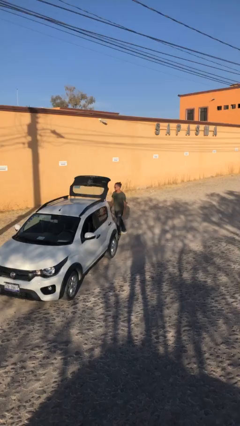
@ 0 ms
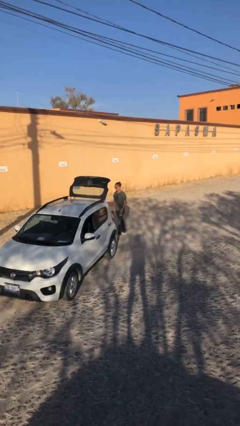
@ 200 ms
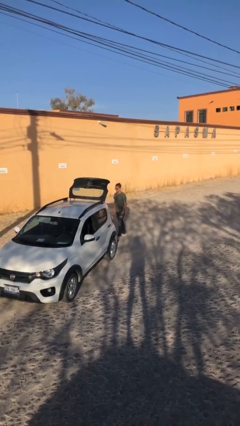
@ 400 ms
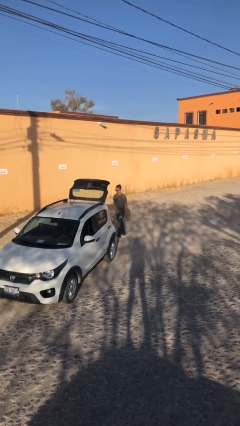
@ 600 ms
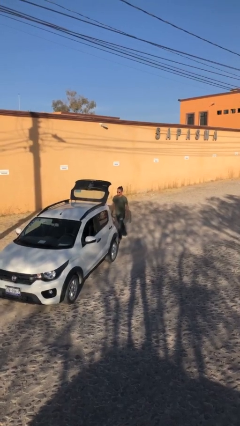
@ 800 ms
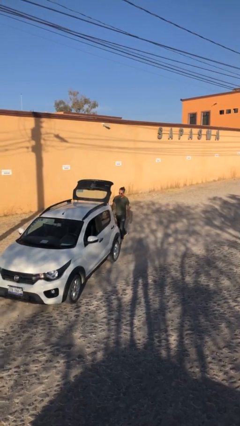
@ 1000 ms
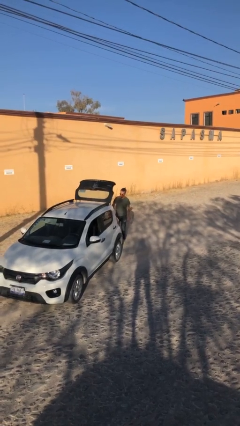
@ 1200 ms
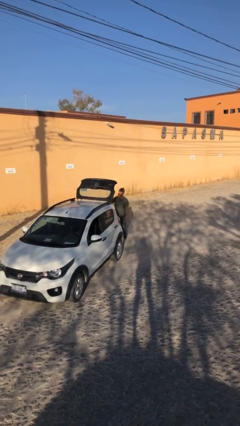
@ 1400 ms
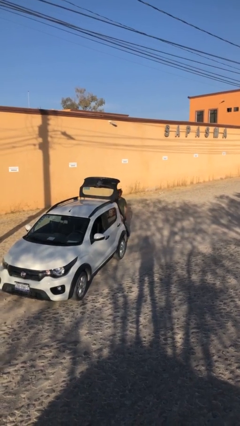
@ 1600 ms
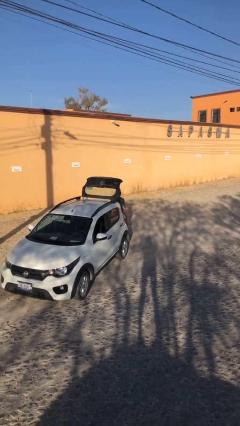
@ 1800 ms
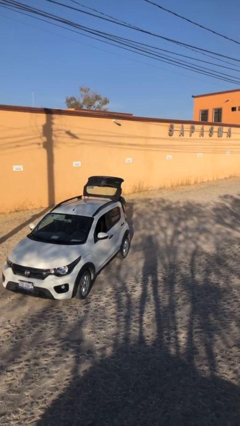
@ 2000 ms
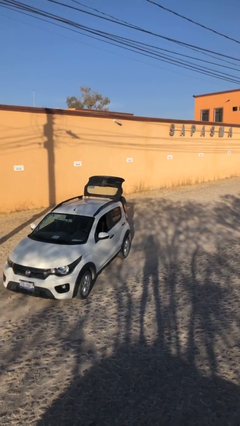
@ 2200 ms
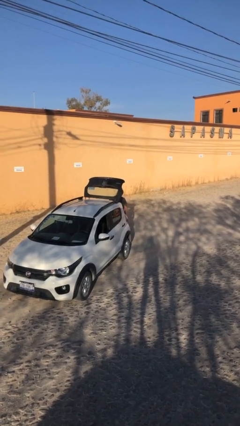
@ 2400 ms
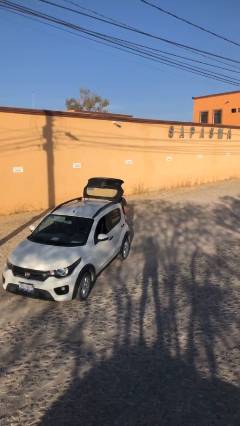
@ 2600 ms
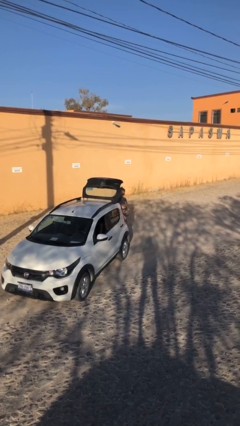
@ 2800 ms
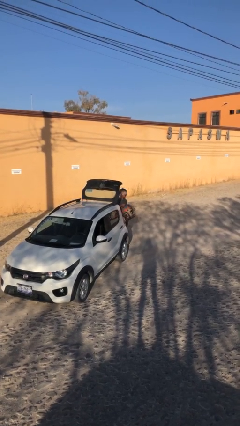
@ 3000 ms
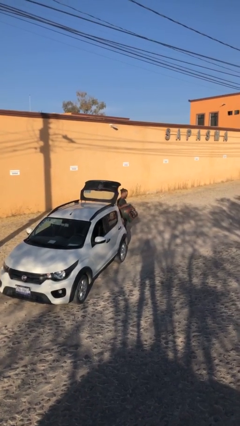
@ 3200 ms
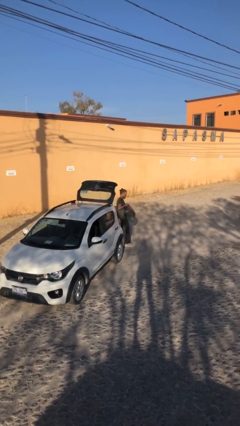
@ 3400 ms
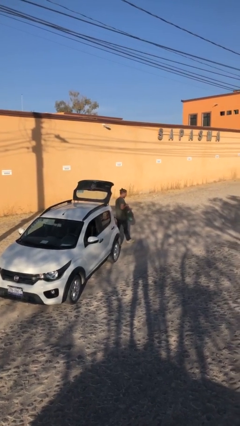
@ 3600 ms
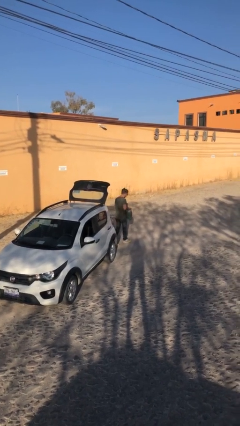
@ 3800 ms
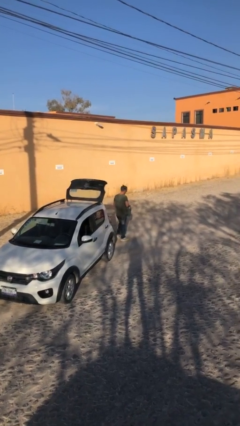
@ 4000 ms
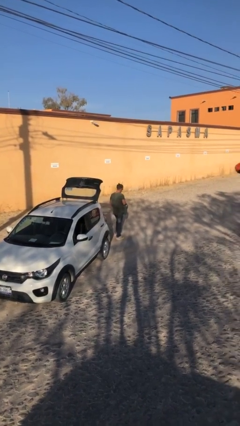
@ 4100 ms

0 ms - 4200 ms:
person unloads car

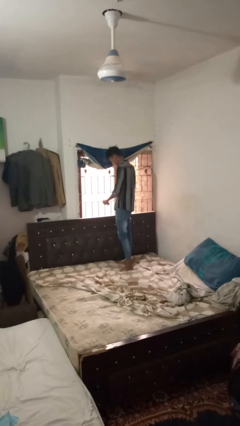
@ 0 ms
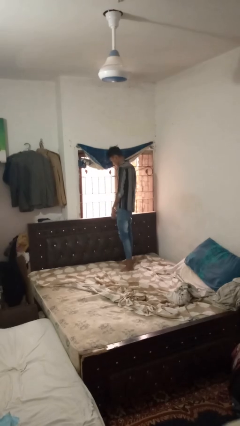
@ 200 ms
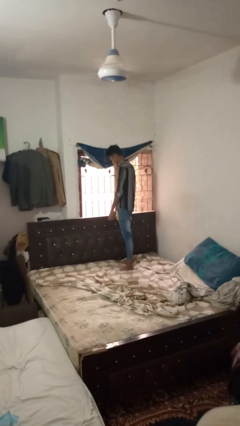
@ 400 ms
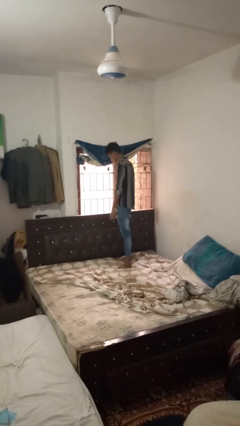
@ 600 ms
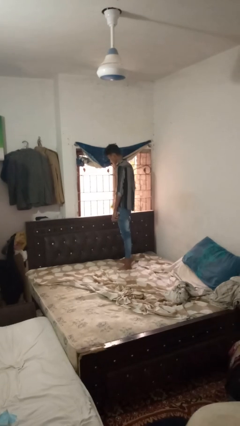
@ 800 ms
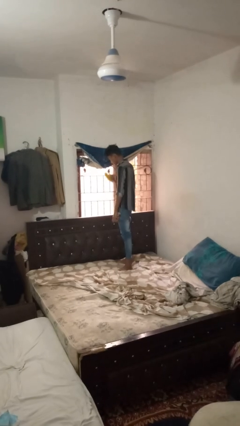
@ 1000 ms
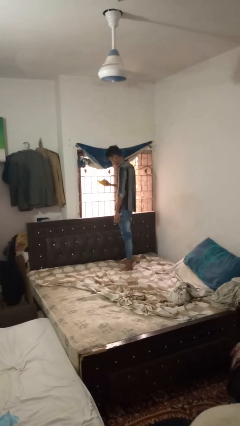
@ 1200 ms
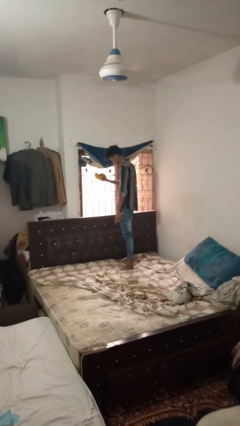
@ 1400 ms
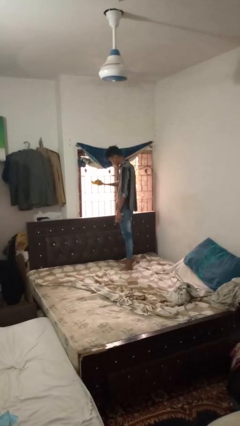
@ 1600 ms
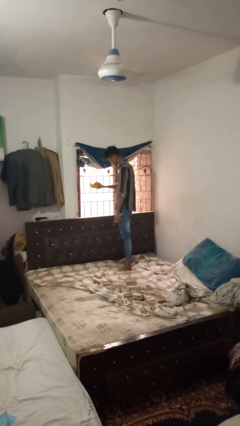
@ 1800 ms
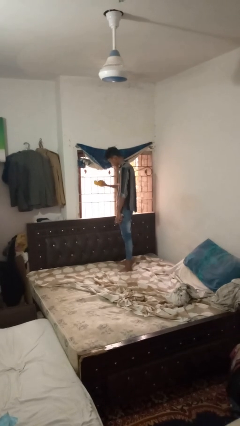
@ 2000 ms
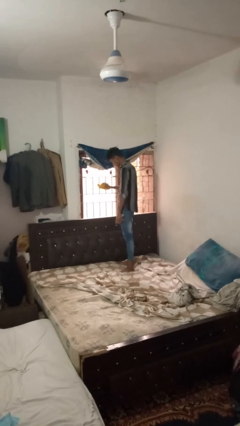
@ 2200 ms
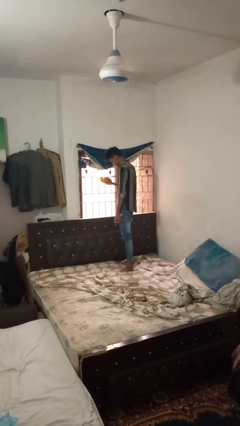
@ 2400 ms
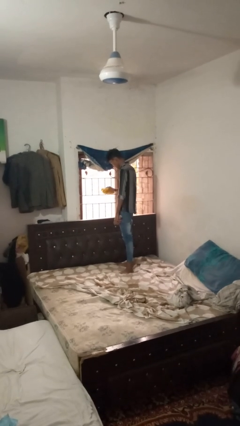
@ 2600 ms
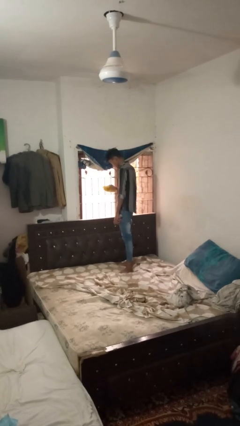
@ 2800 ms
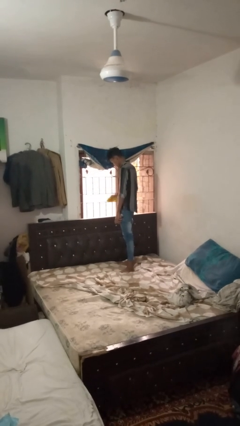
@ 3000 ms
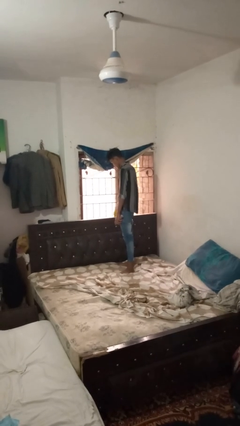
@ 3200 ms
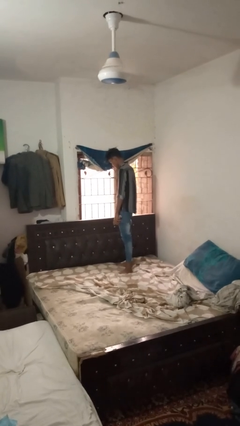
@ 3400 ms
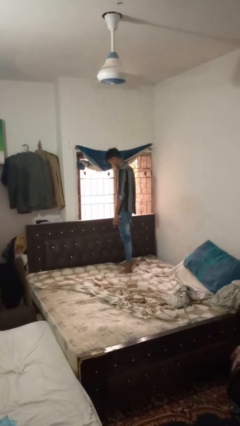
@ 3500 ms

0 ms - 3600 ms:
person washes window

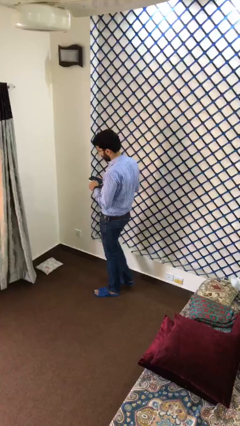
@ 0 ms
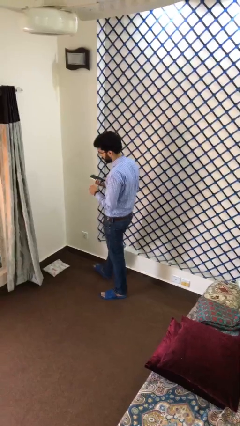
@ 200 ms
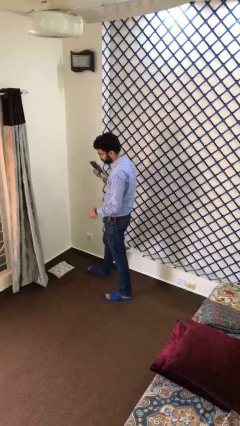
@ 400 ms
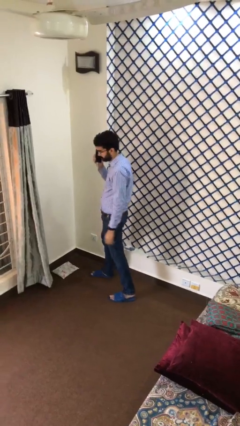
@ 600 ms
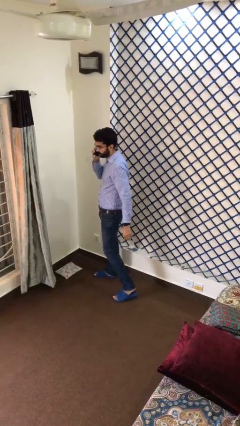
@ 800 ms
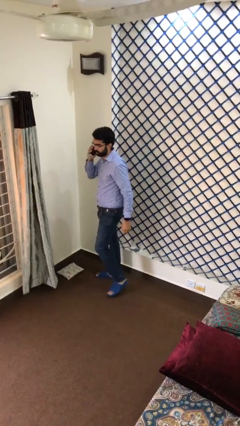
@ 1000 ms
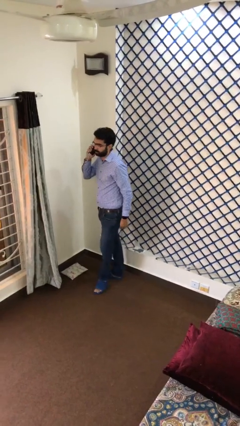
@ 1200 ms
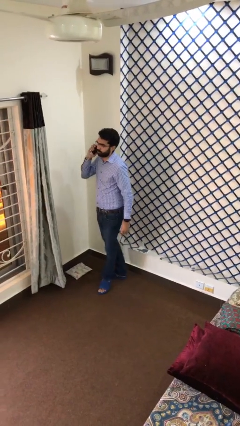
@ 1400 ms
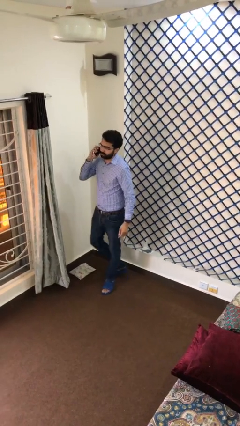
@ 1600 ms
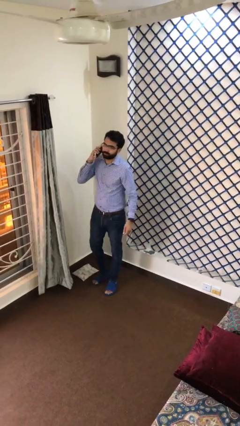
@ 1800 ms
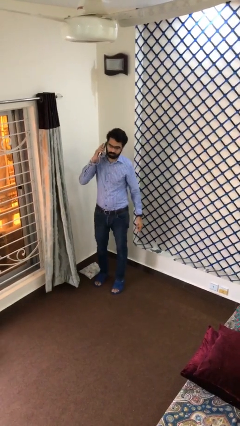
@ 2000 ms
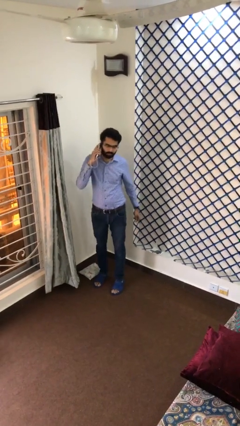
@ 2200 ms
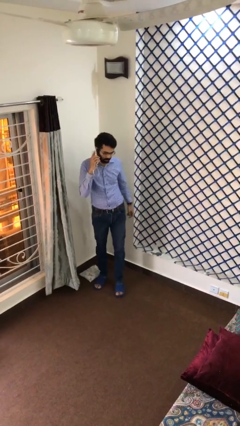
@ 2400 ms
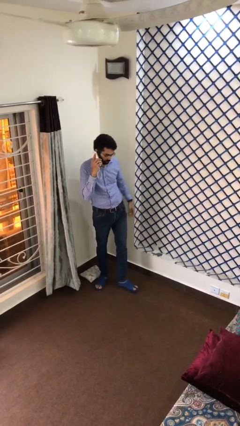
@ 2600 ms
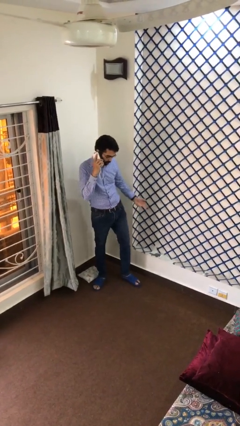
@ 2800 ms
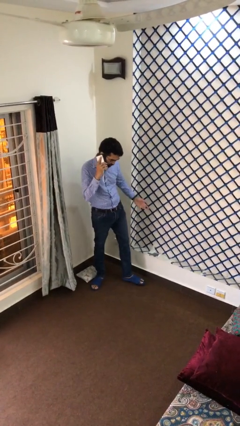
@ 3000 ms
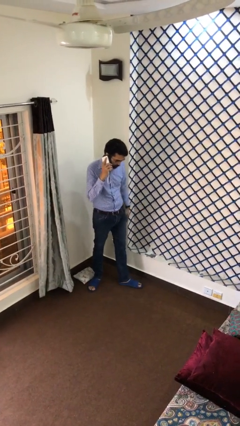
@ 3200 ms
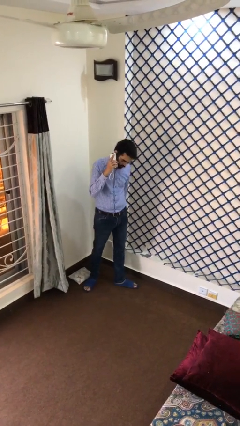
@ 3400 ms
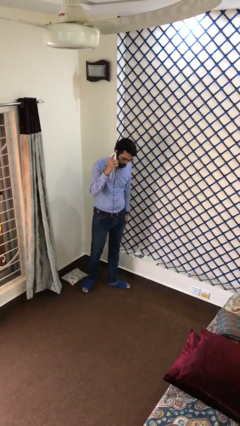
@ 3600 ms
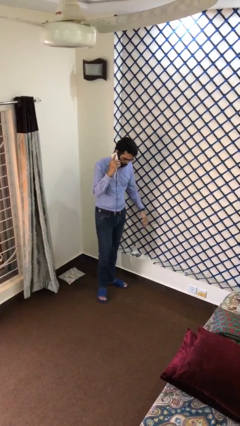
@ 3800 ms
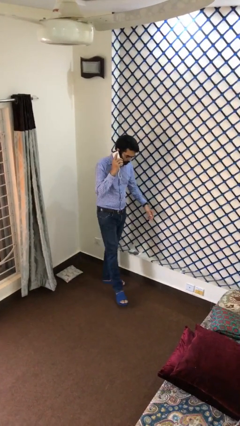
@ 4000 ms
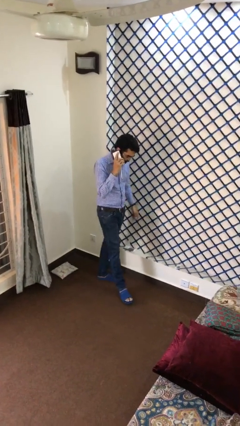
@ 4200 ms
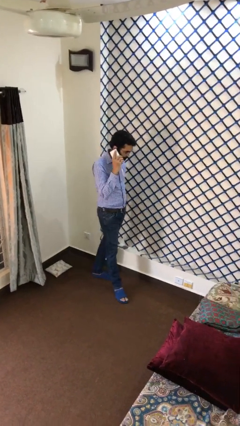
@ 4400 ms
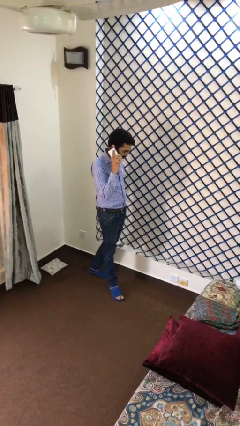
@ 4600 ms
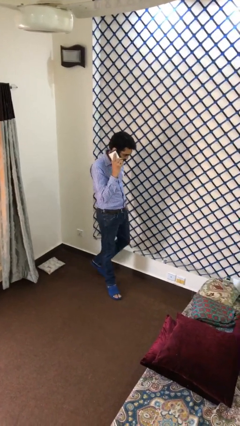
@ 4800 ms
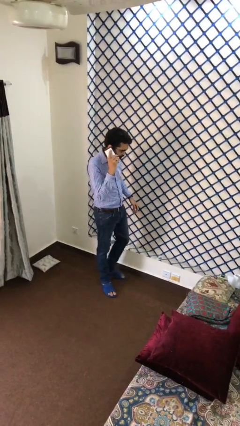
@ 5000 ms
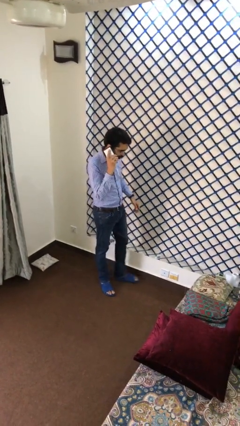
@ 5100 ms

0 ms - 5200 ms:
person talks on phone

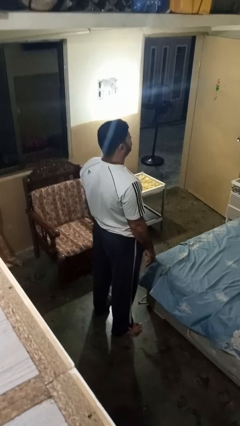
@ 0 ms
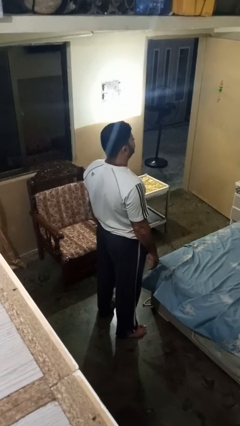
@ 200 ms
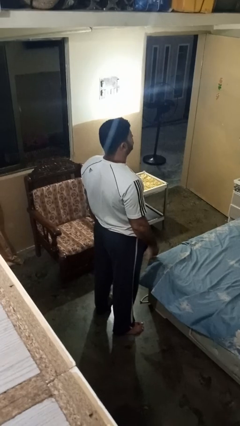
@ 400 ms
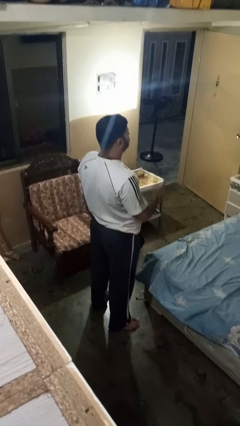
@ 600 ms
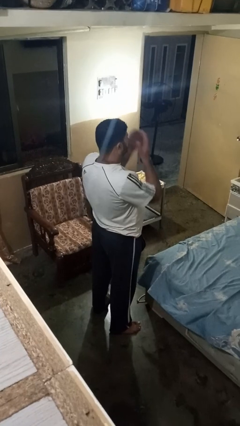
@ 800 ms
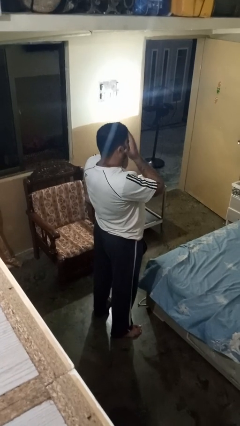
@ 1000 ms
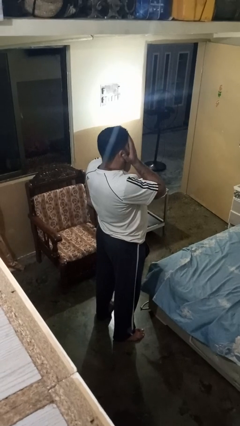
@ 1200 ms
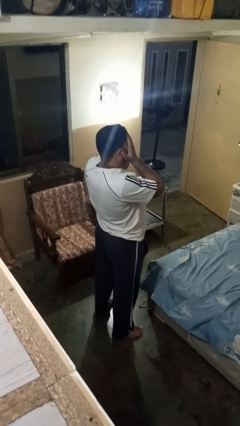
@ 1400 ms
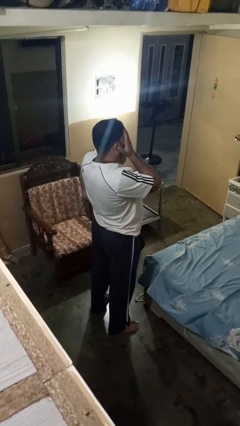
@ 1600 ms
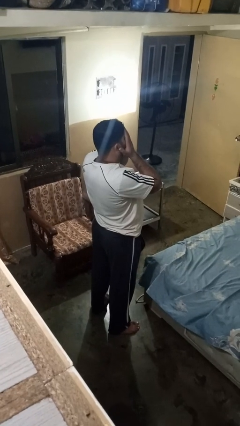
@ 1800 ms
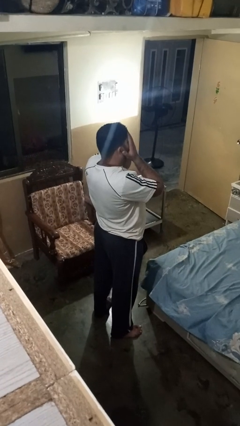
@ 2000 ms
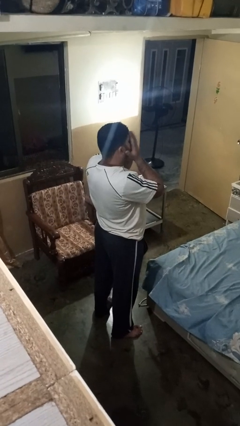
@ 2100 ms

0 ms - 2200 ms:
person covers face with hands

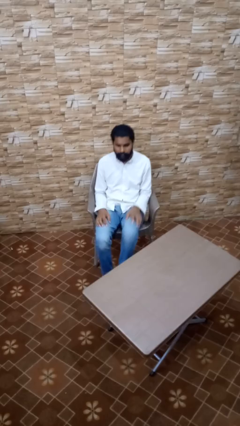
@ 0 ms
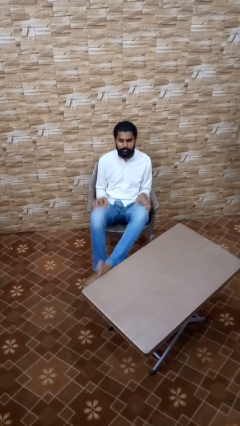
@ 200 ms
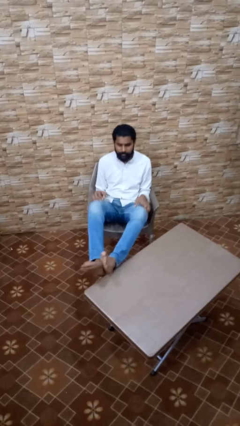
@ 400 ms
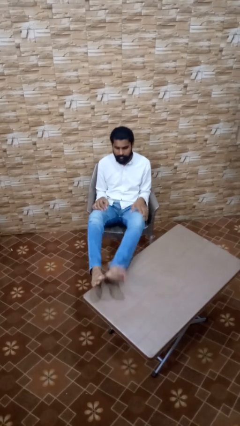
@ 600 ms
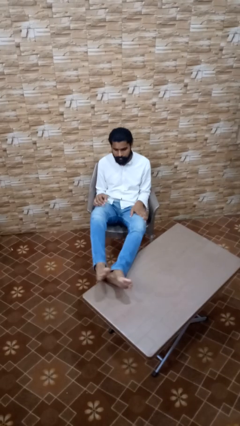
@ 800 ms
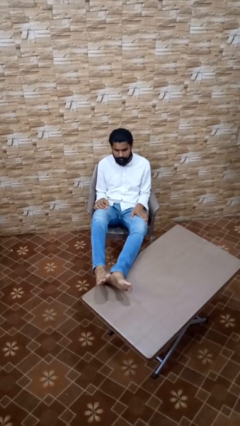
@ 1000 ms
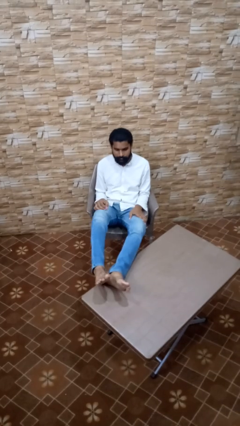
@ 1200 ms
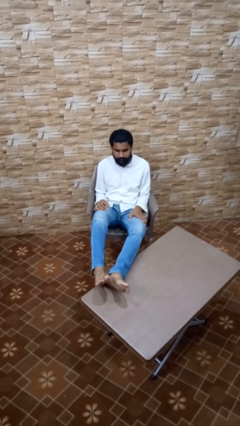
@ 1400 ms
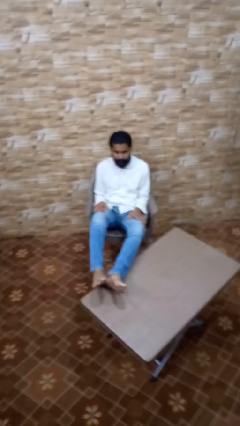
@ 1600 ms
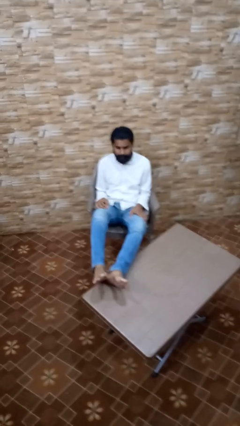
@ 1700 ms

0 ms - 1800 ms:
person puts feet up

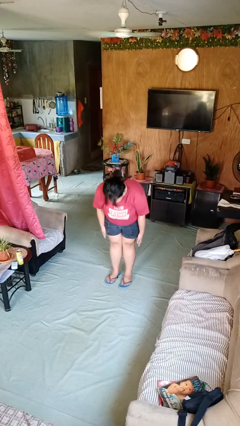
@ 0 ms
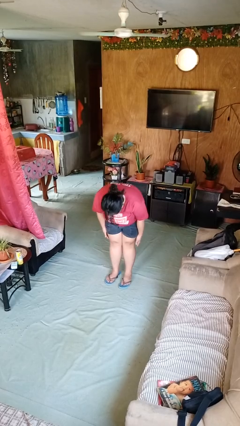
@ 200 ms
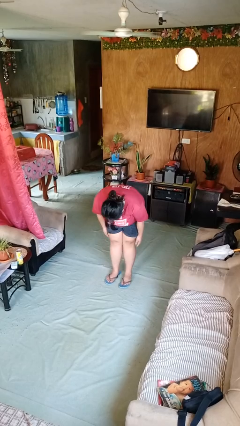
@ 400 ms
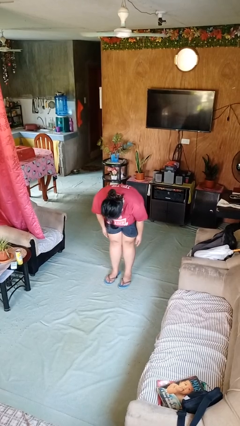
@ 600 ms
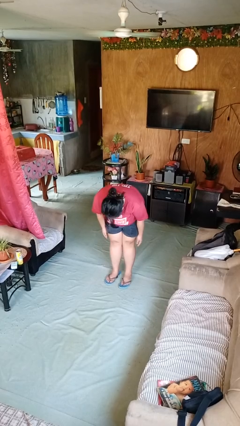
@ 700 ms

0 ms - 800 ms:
person bows
